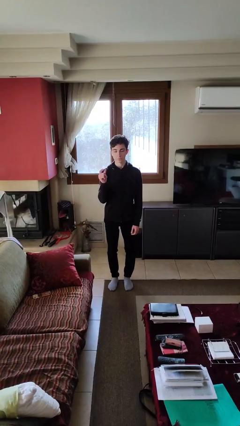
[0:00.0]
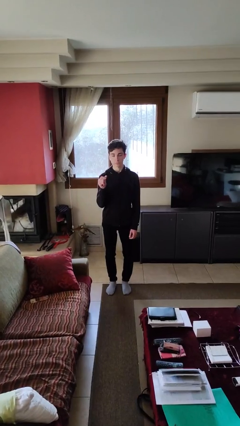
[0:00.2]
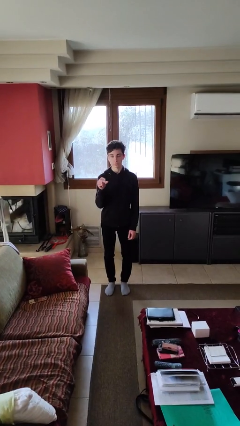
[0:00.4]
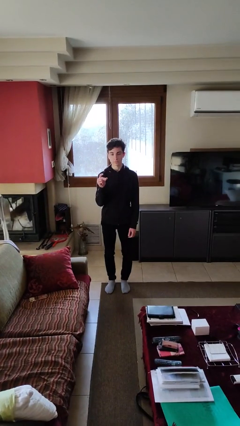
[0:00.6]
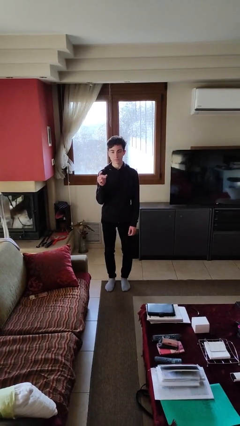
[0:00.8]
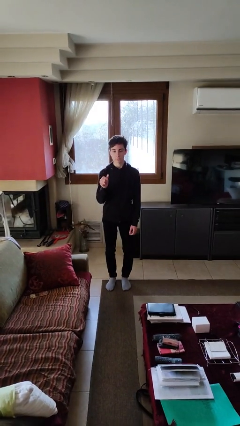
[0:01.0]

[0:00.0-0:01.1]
person snaps fingers

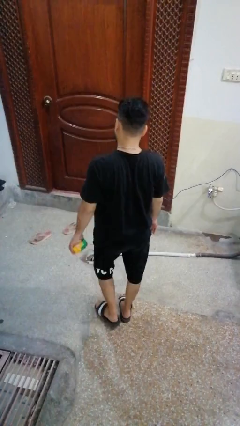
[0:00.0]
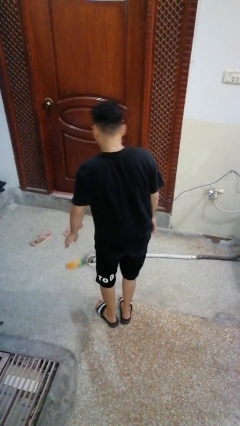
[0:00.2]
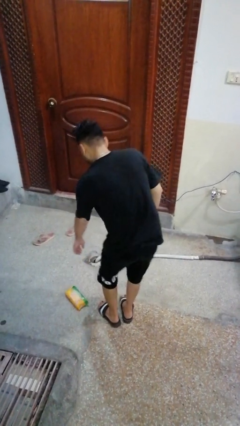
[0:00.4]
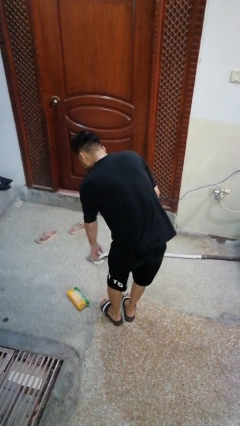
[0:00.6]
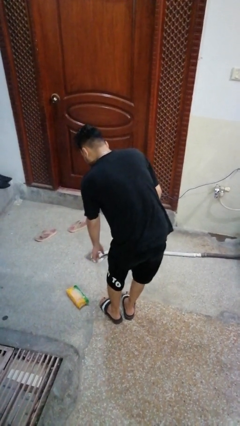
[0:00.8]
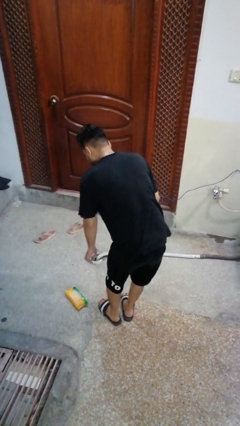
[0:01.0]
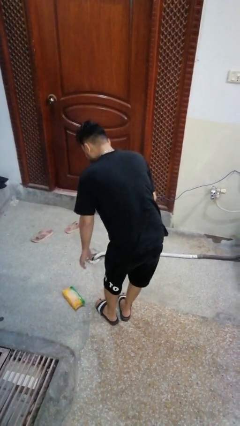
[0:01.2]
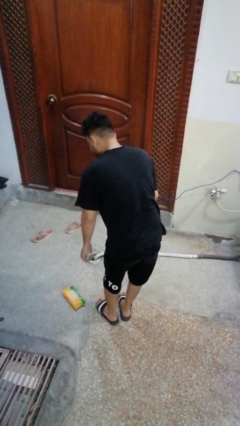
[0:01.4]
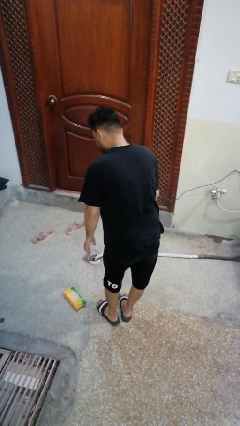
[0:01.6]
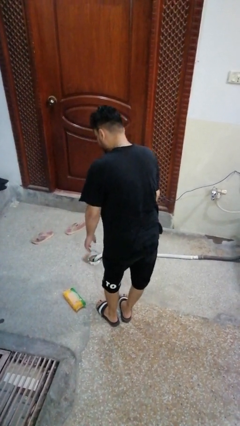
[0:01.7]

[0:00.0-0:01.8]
person drops object

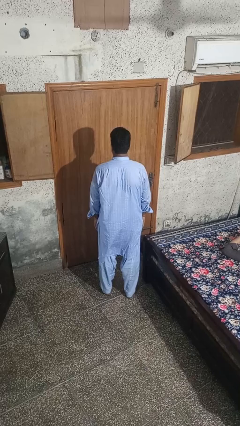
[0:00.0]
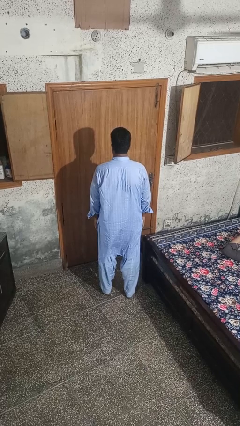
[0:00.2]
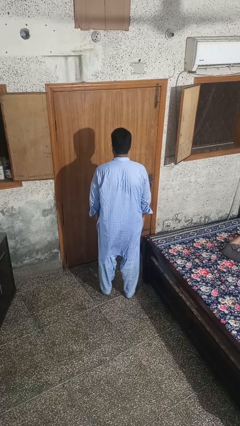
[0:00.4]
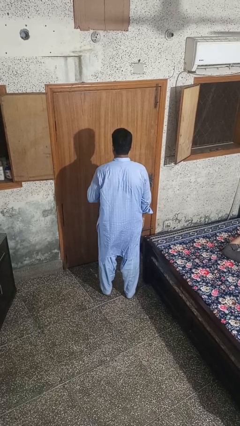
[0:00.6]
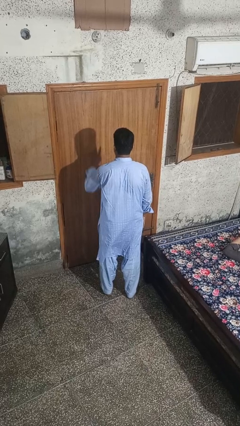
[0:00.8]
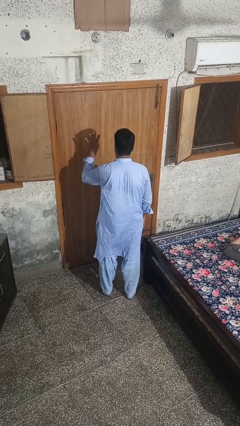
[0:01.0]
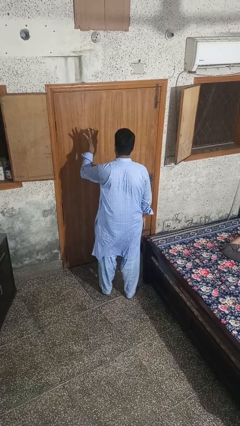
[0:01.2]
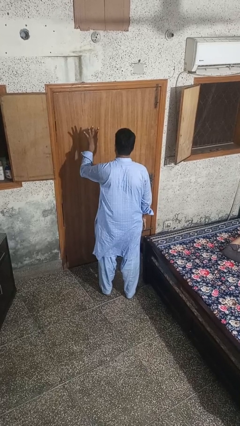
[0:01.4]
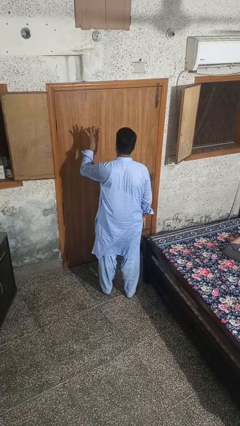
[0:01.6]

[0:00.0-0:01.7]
person gestures number four

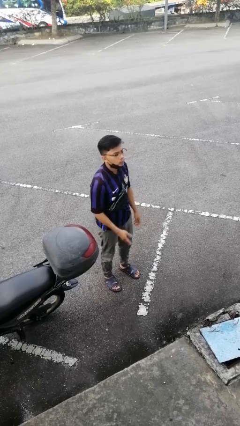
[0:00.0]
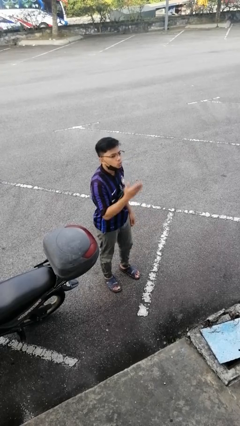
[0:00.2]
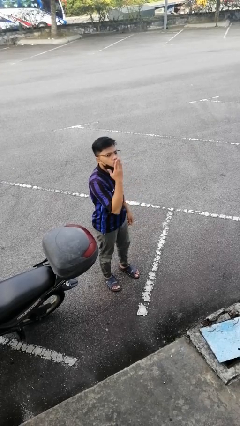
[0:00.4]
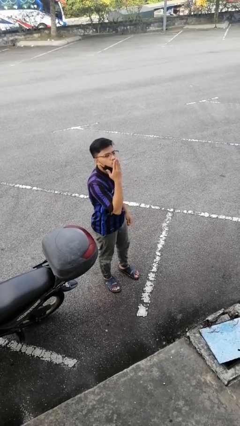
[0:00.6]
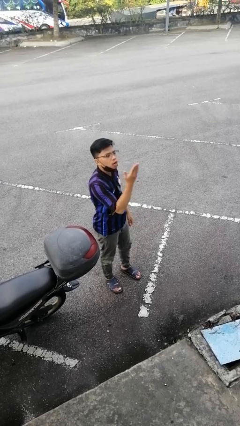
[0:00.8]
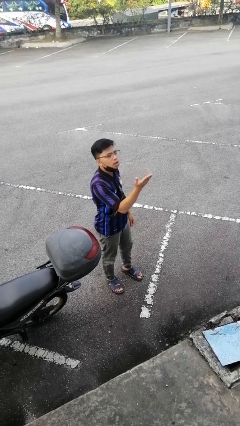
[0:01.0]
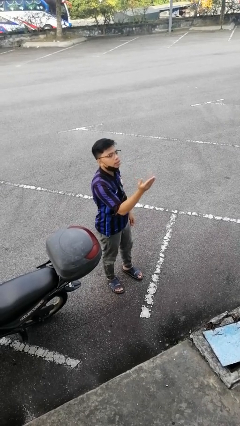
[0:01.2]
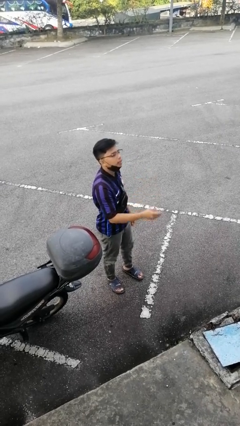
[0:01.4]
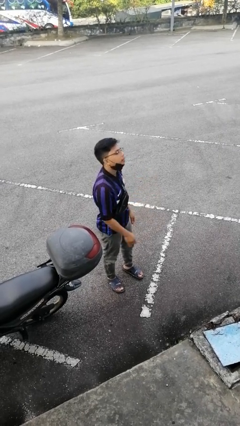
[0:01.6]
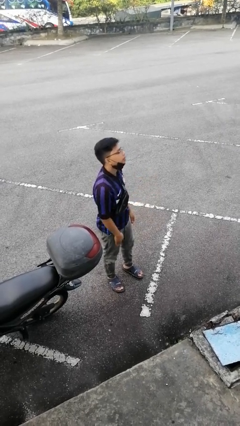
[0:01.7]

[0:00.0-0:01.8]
person gestures blow kiss

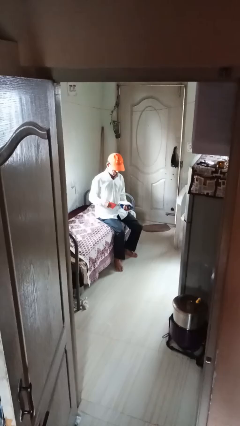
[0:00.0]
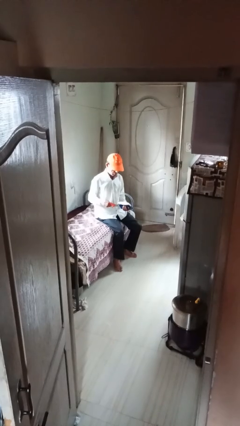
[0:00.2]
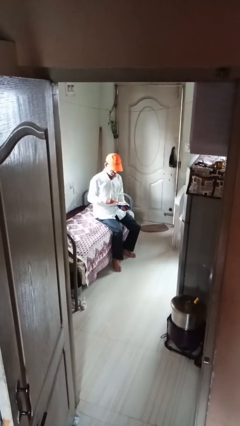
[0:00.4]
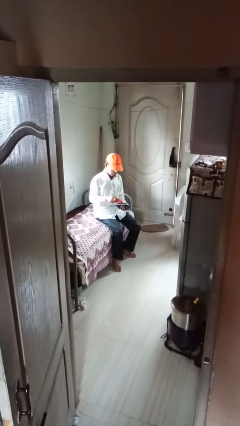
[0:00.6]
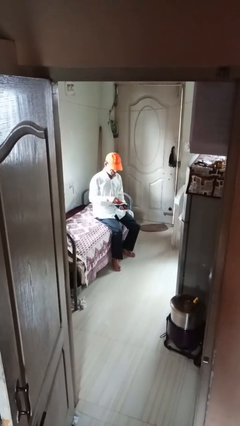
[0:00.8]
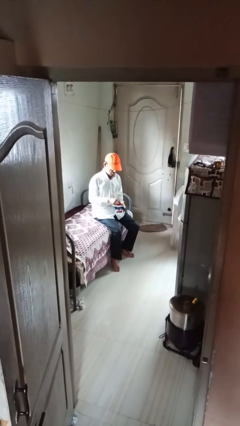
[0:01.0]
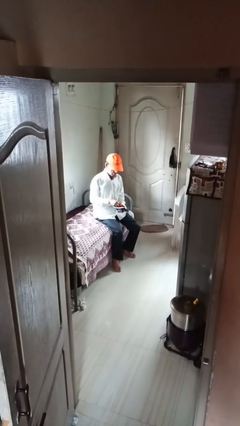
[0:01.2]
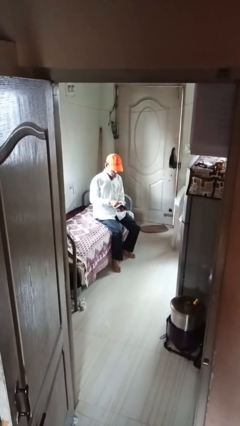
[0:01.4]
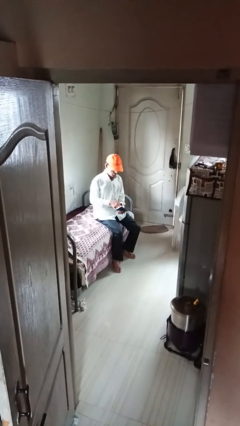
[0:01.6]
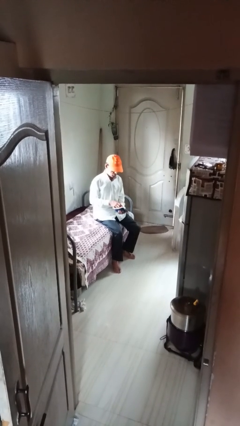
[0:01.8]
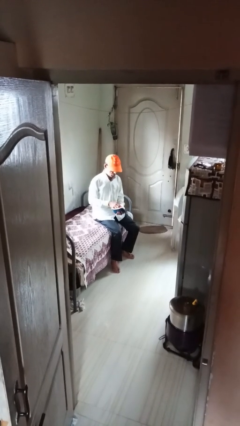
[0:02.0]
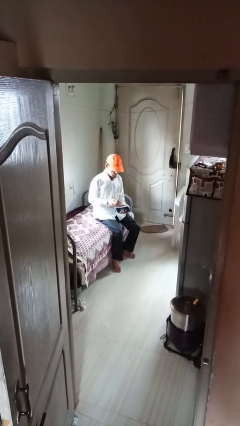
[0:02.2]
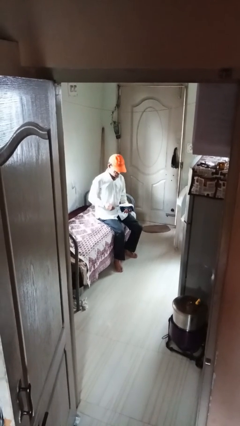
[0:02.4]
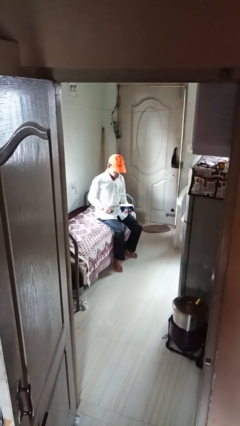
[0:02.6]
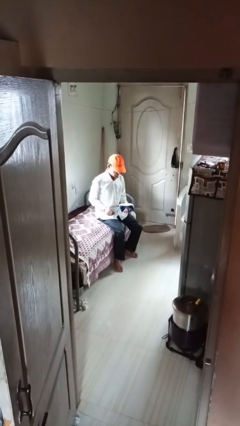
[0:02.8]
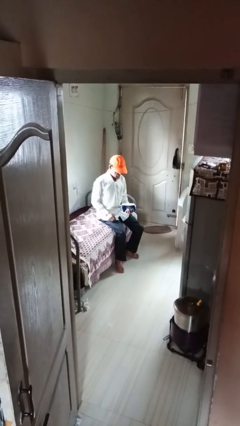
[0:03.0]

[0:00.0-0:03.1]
person puts object into purse

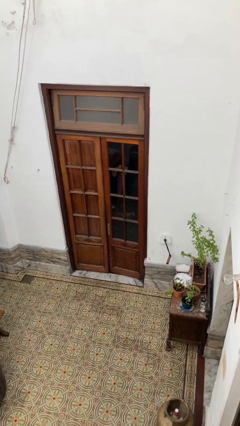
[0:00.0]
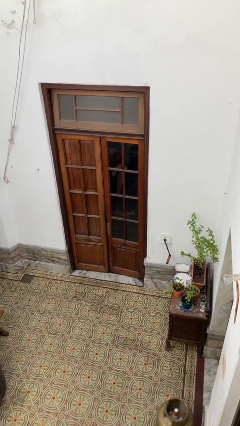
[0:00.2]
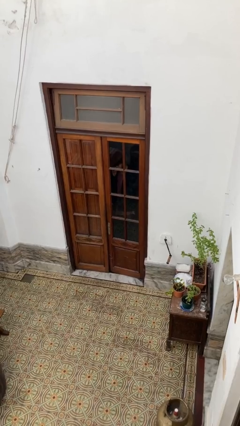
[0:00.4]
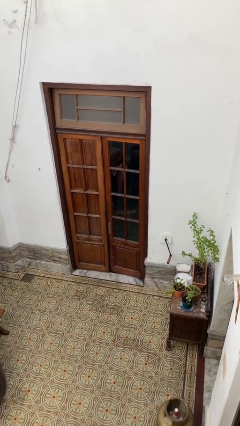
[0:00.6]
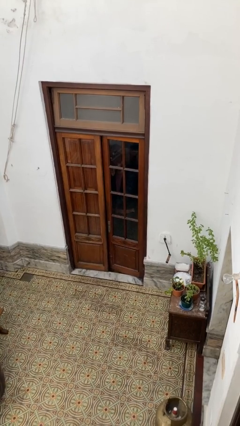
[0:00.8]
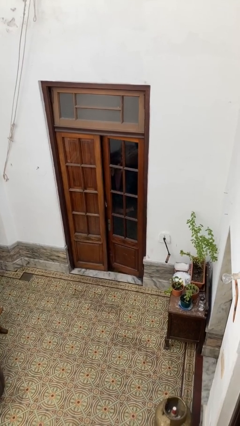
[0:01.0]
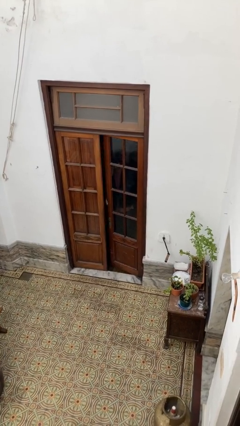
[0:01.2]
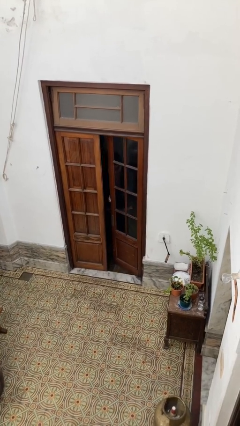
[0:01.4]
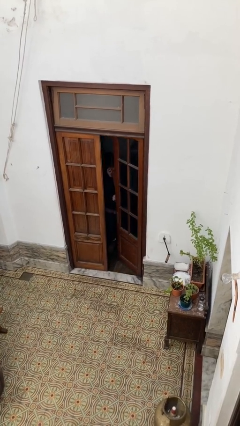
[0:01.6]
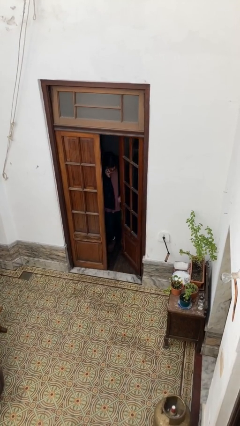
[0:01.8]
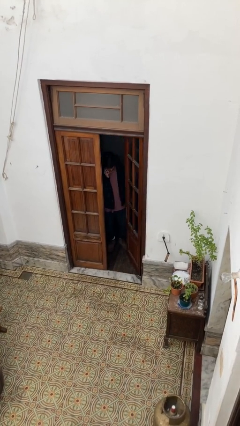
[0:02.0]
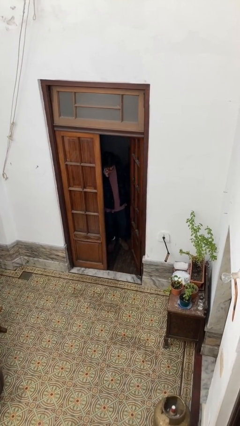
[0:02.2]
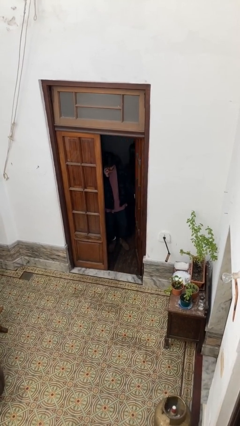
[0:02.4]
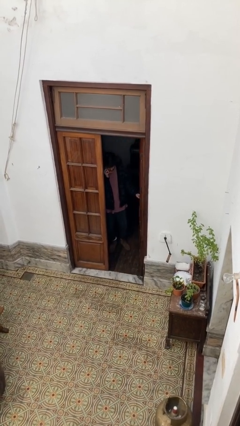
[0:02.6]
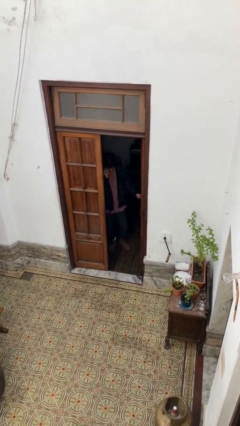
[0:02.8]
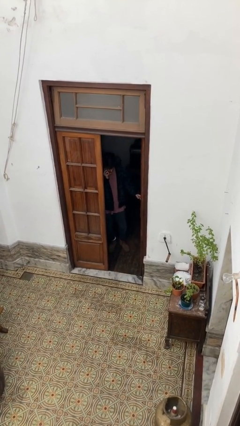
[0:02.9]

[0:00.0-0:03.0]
person opens facility door

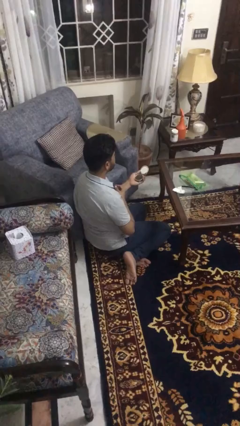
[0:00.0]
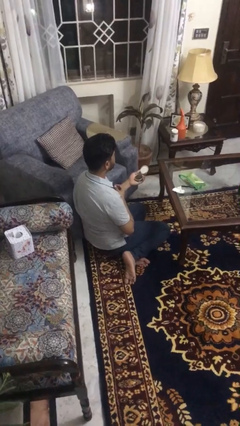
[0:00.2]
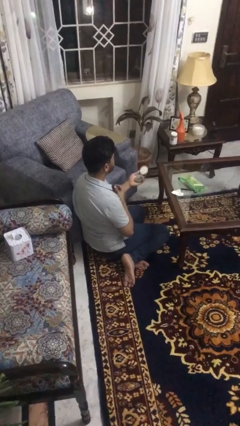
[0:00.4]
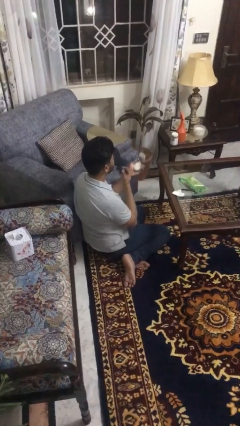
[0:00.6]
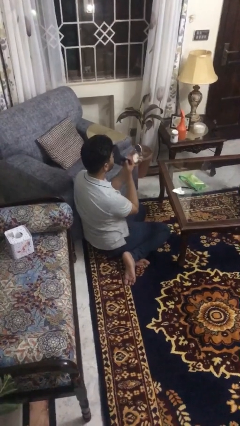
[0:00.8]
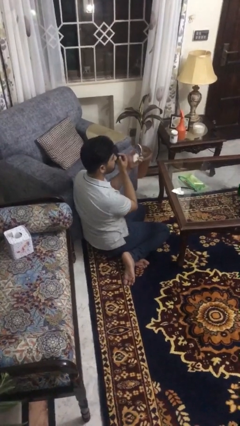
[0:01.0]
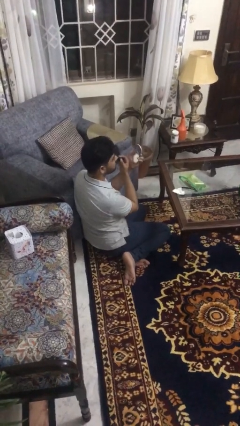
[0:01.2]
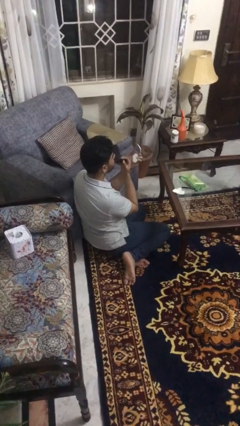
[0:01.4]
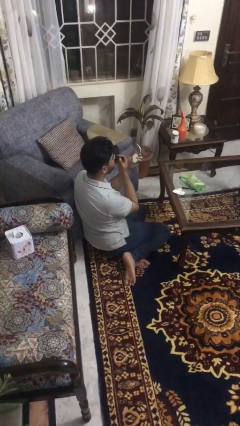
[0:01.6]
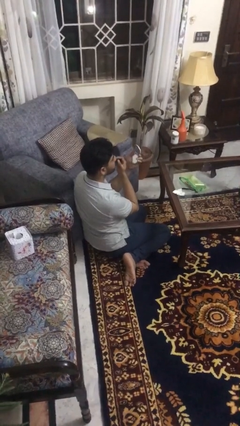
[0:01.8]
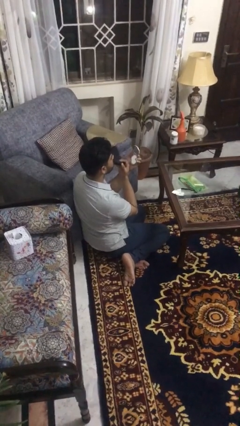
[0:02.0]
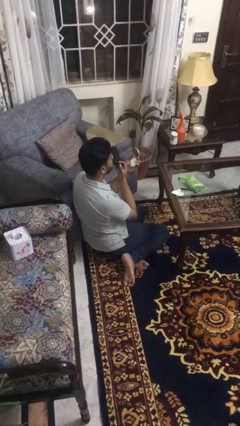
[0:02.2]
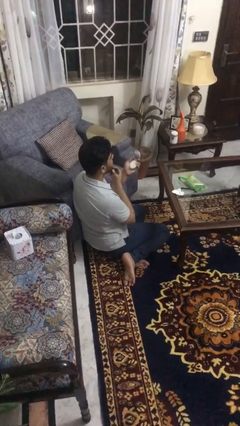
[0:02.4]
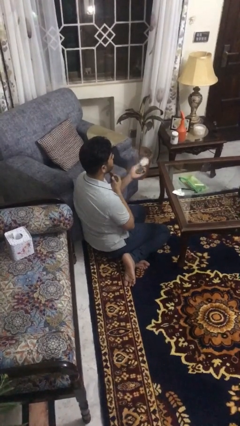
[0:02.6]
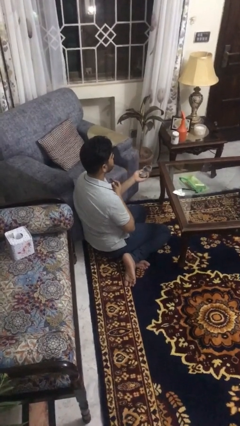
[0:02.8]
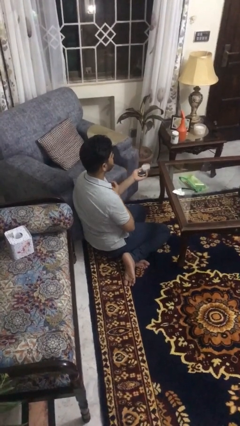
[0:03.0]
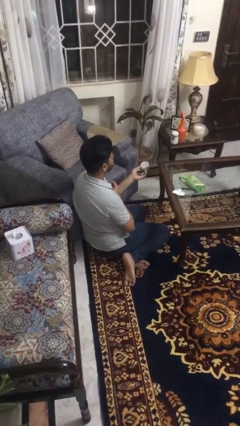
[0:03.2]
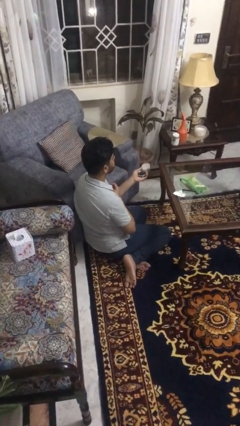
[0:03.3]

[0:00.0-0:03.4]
person applies lip makeup

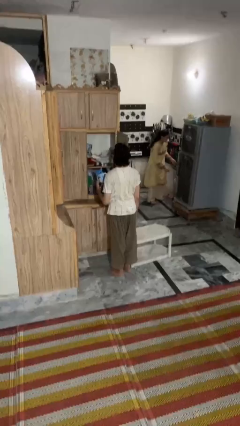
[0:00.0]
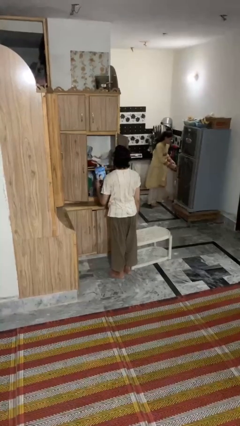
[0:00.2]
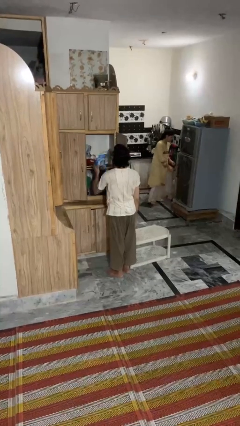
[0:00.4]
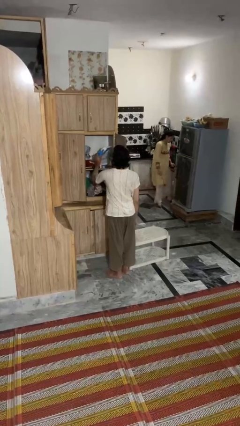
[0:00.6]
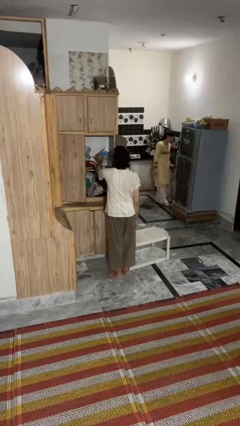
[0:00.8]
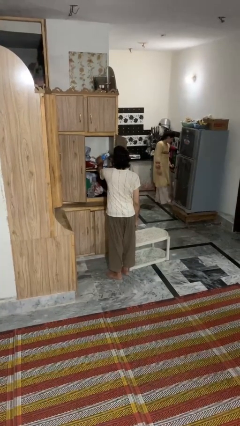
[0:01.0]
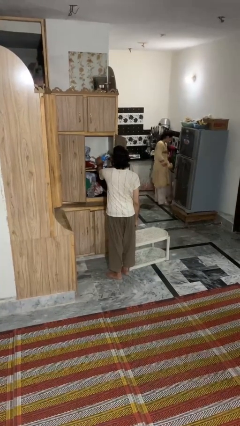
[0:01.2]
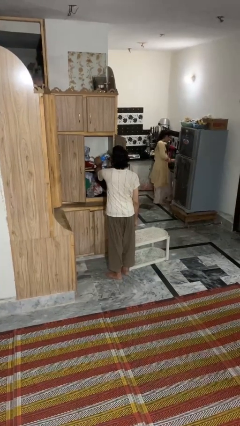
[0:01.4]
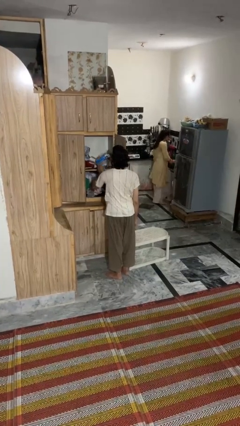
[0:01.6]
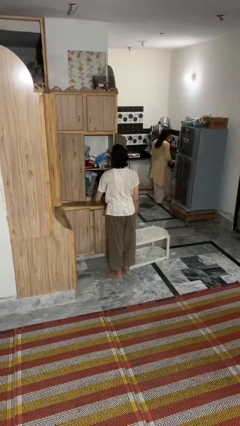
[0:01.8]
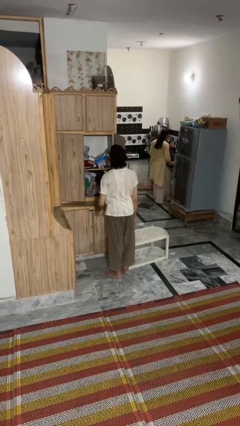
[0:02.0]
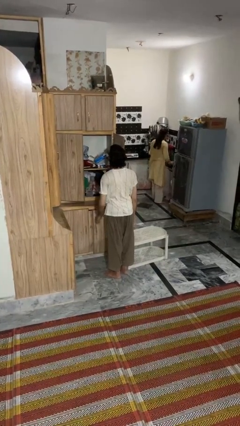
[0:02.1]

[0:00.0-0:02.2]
person puts down object into cabinet
